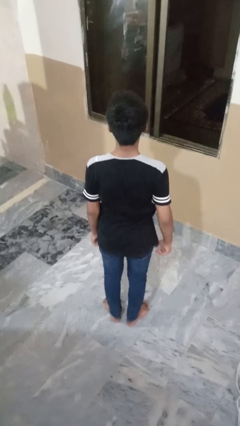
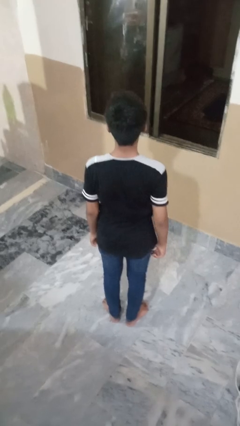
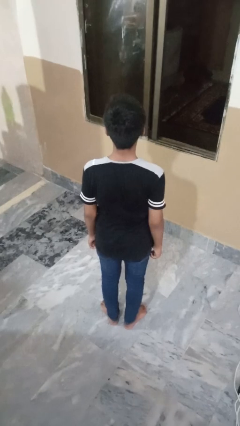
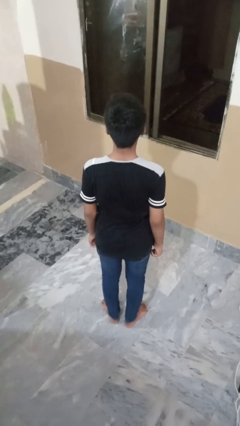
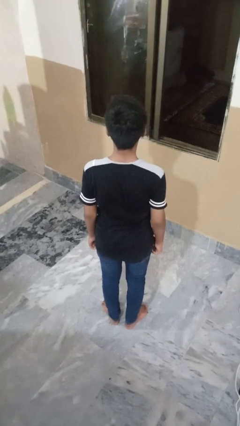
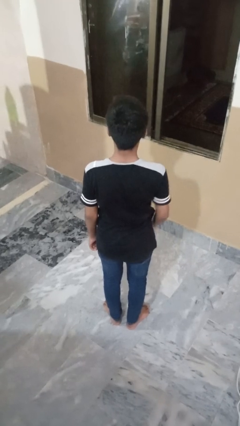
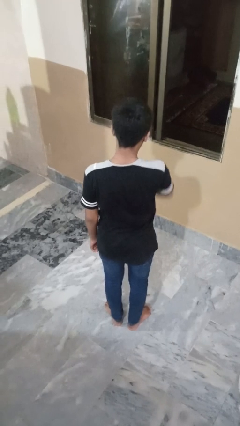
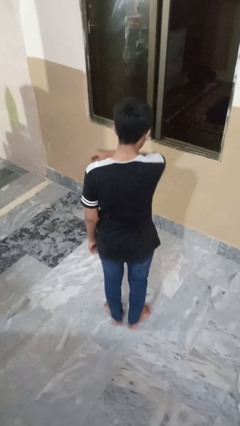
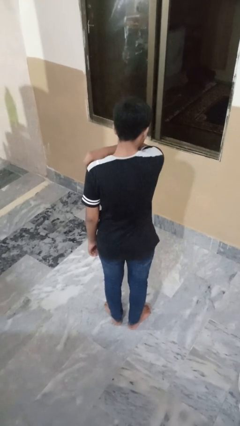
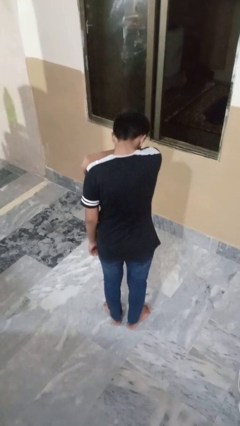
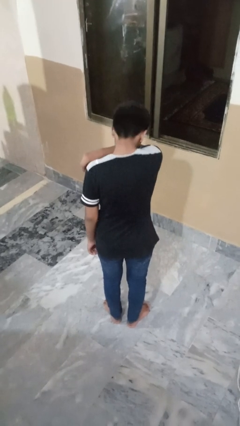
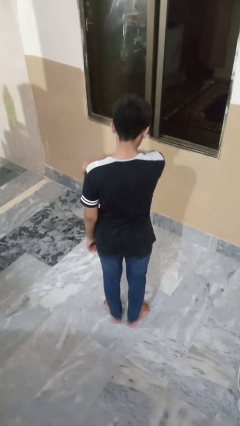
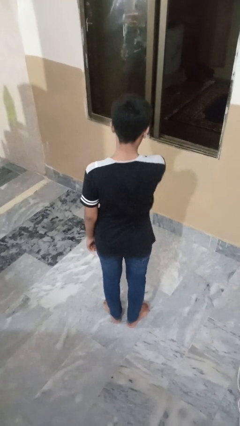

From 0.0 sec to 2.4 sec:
person sneezes into arm

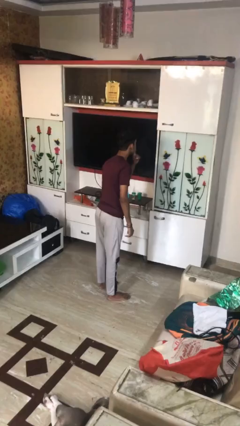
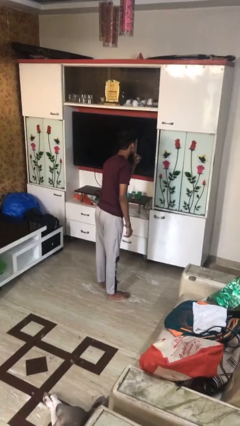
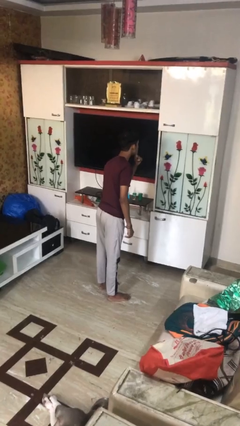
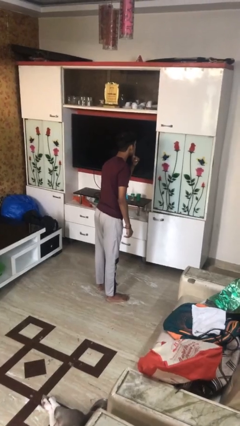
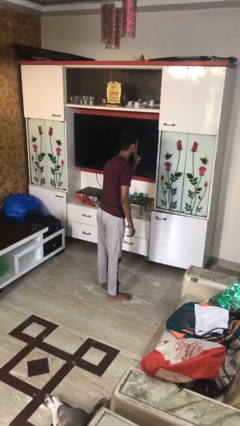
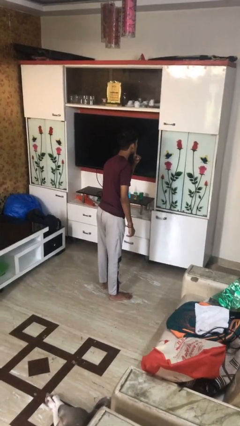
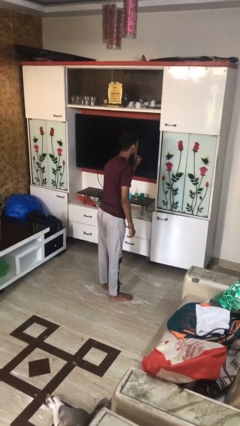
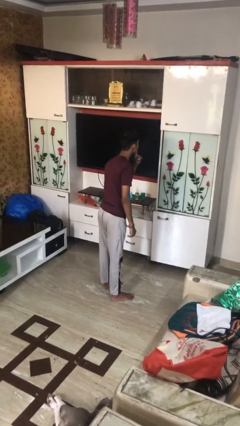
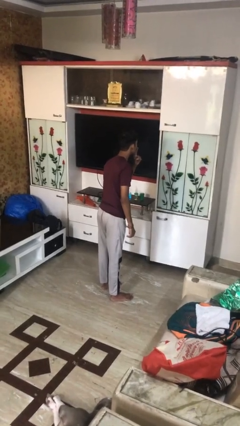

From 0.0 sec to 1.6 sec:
person gestures be quiet

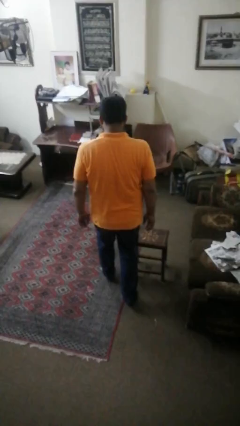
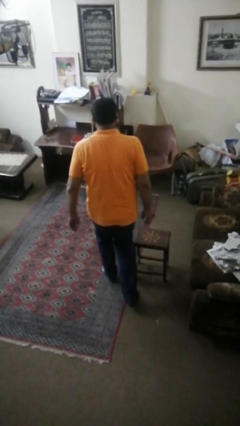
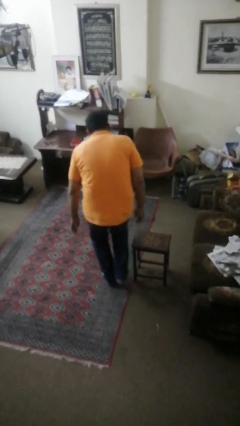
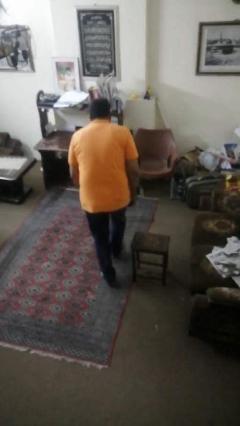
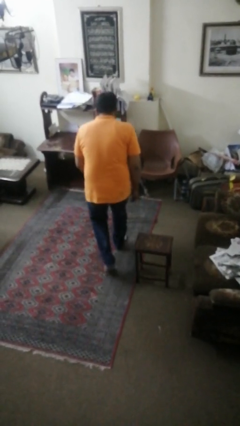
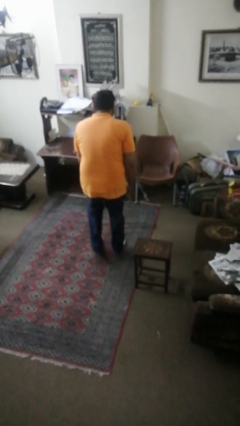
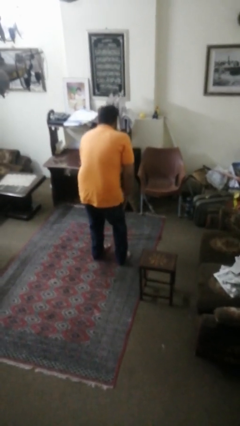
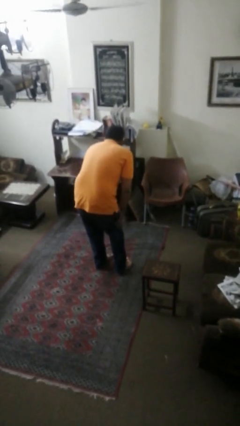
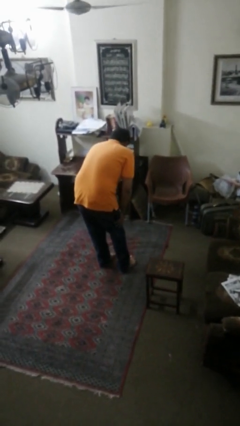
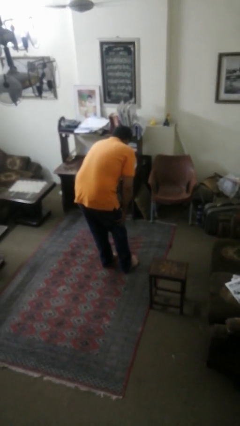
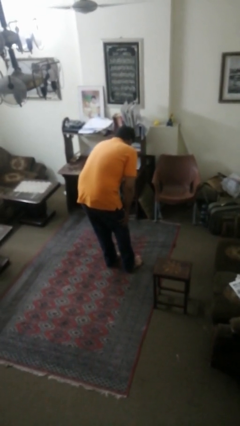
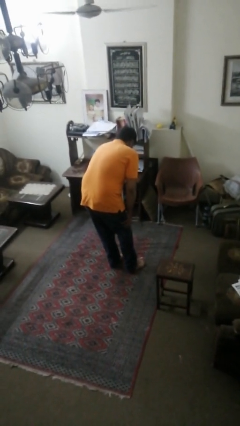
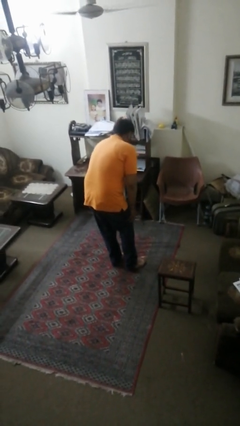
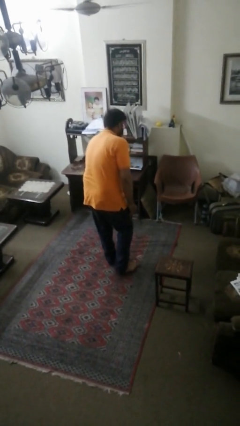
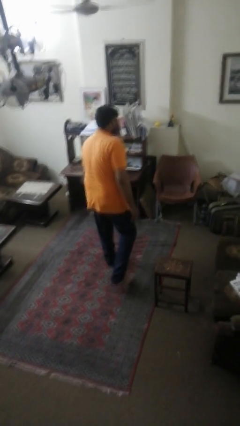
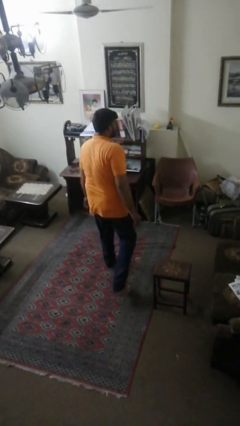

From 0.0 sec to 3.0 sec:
person bumps into table

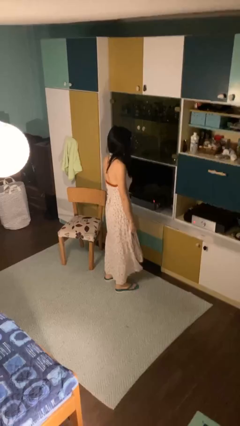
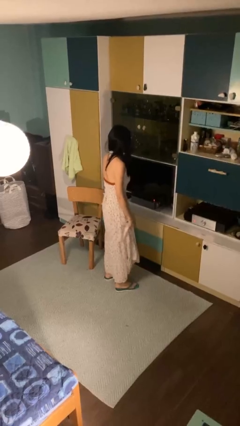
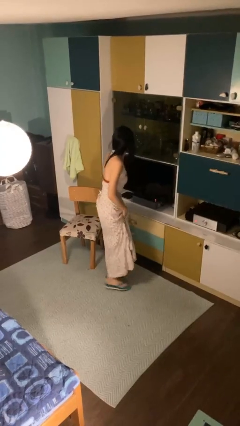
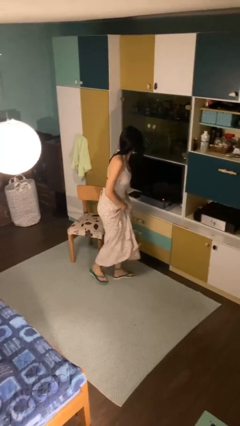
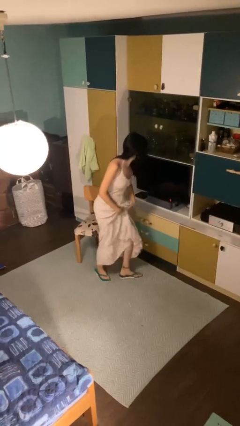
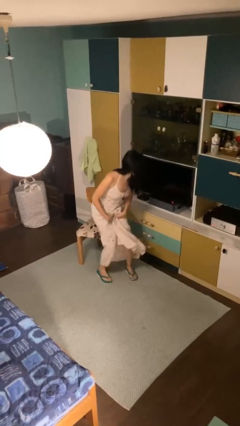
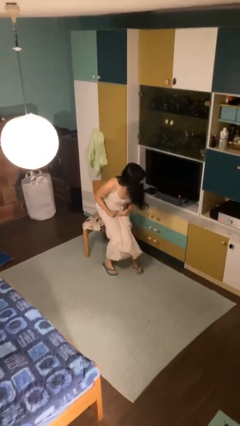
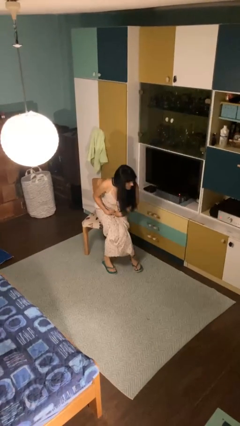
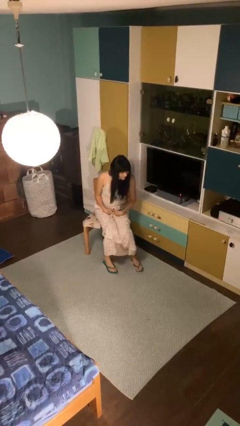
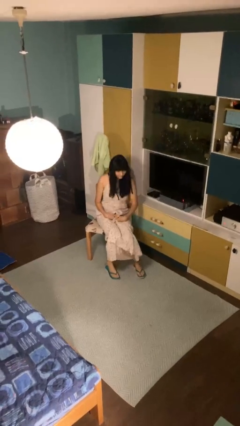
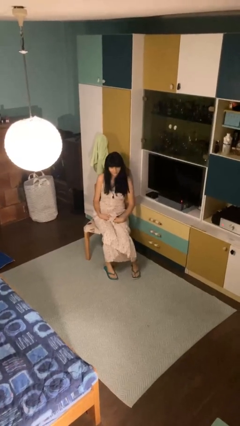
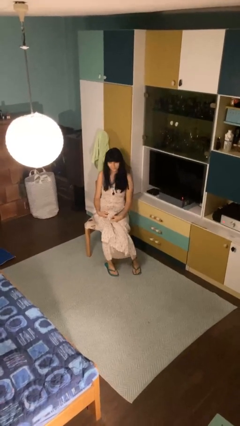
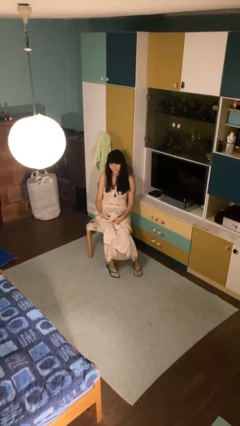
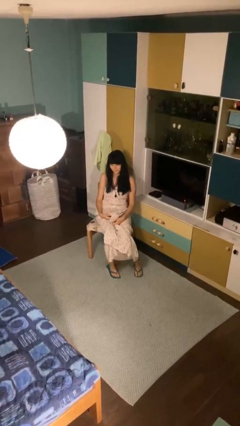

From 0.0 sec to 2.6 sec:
person sits down

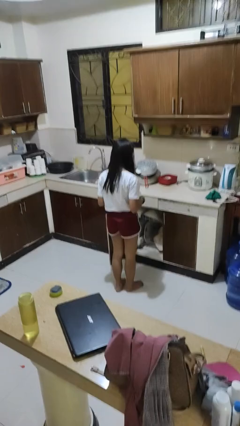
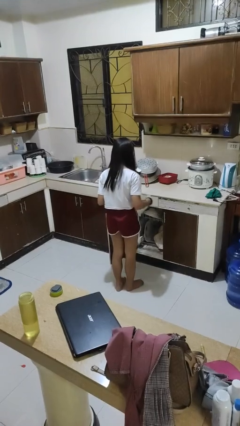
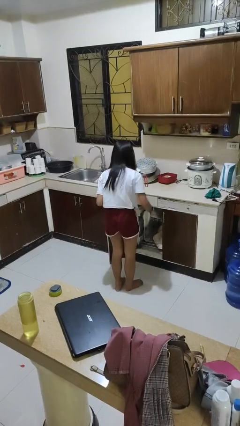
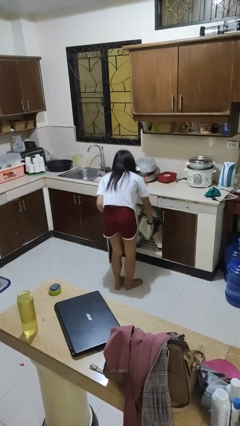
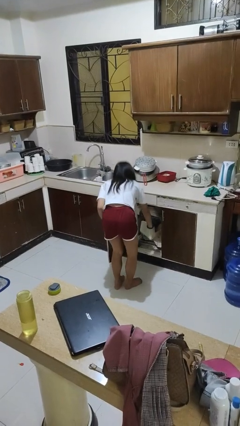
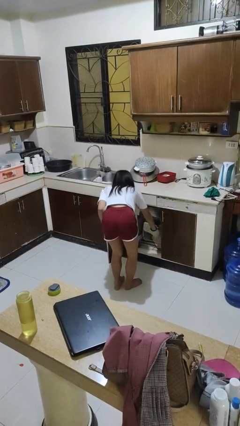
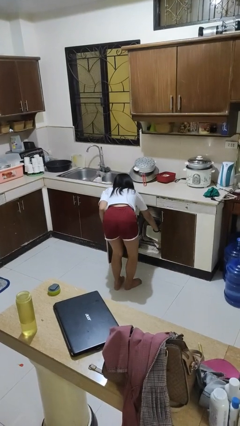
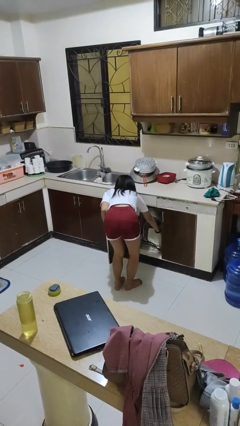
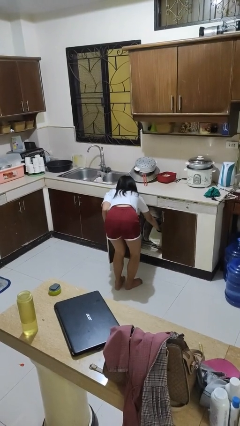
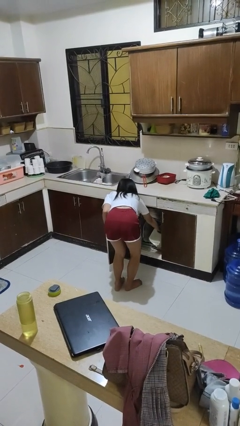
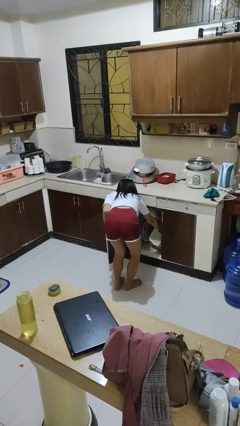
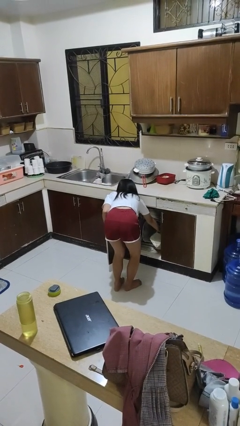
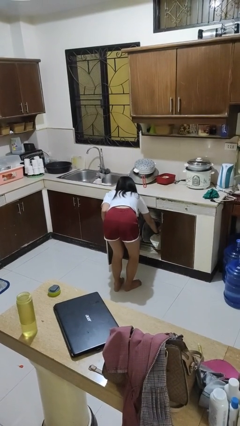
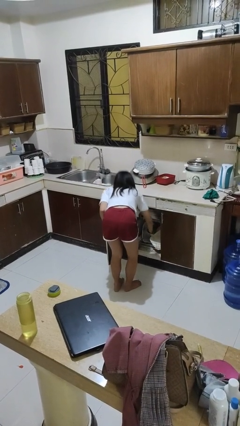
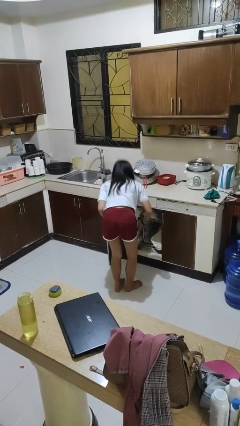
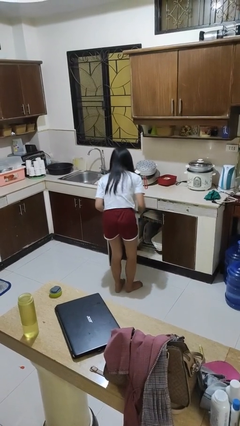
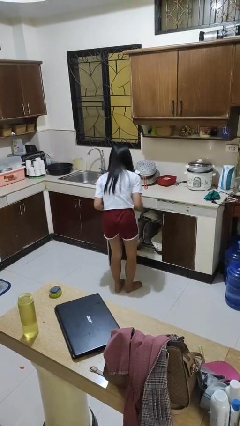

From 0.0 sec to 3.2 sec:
person loads dishwasher

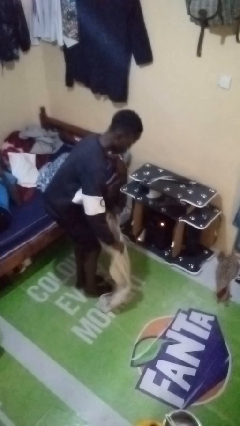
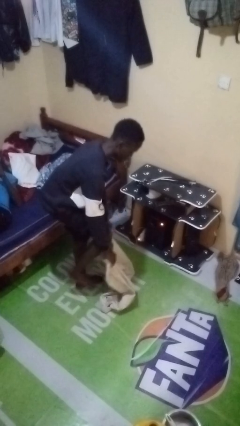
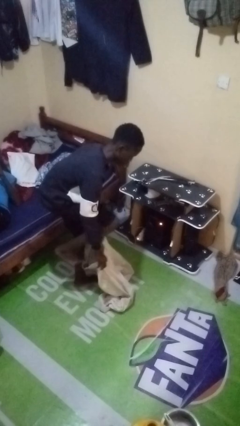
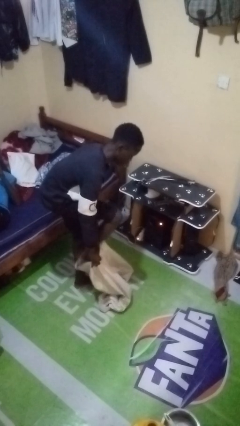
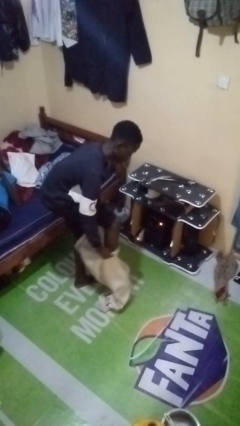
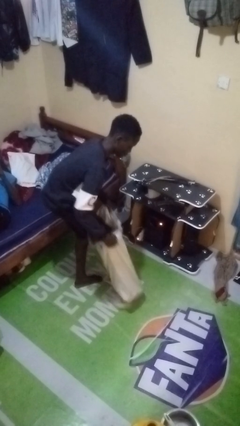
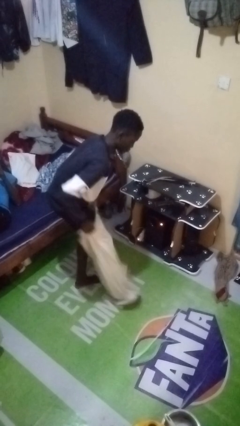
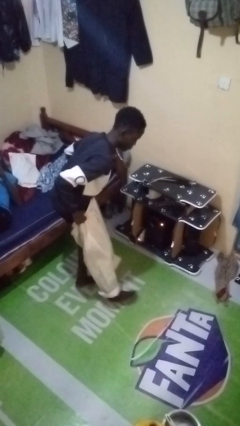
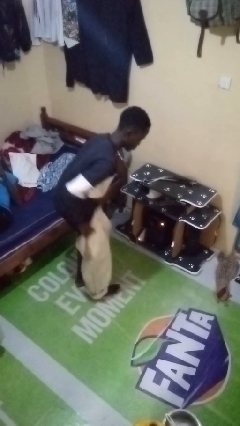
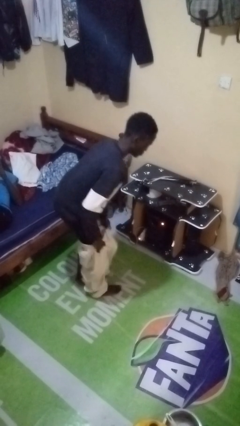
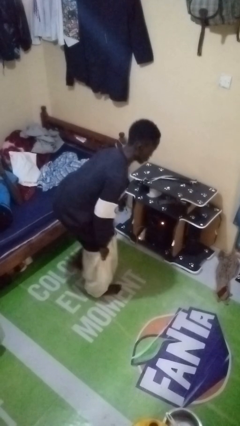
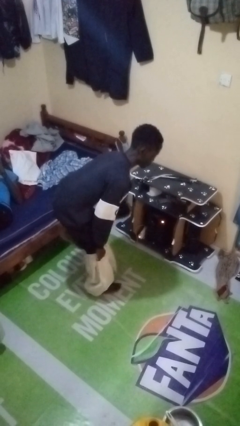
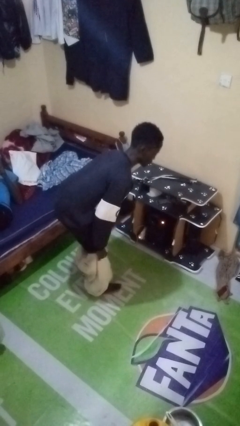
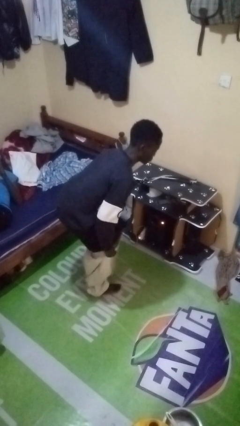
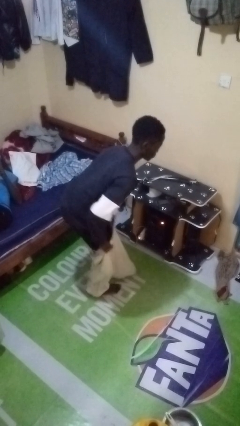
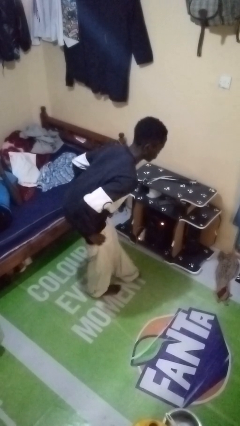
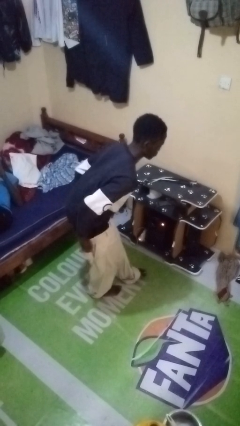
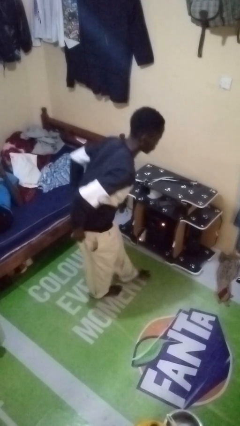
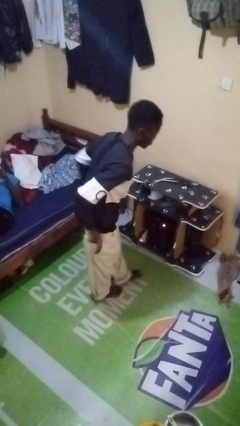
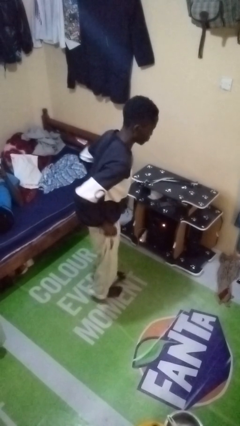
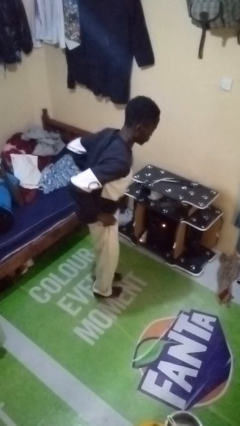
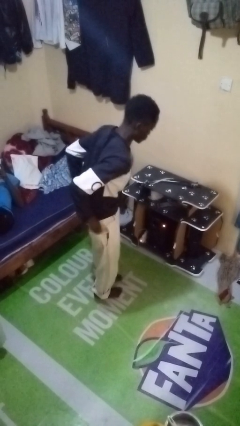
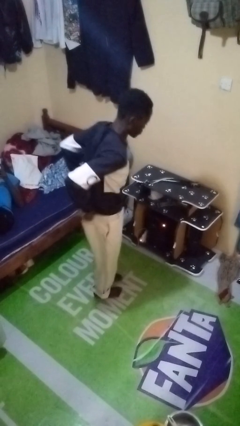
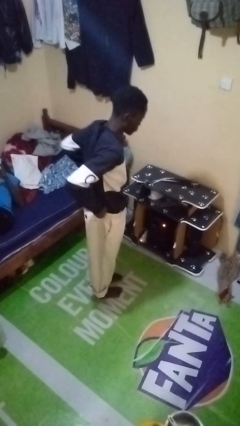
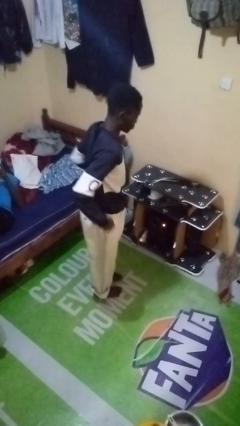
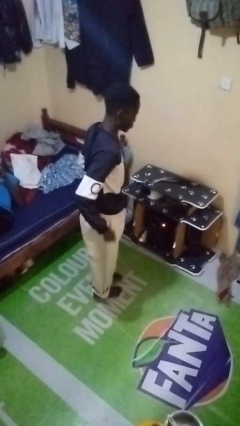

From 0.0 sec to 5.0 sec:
person puts on pants
